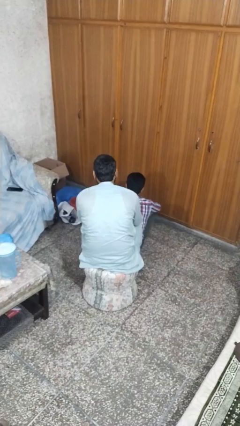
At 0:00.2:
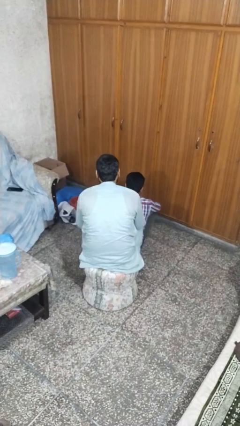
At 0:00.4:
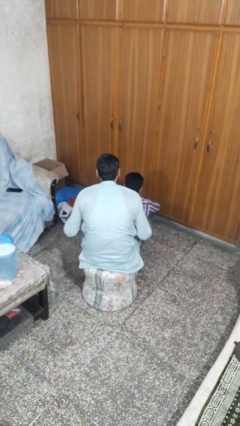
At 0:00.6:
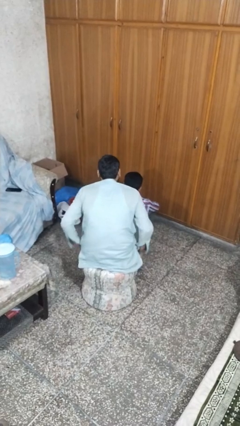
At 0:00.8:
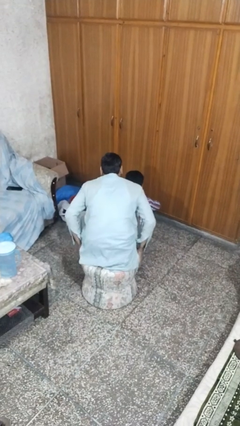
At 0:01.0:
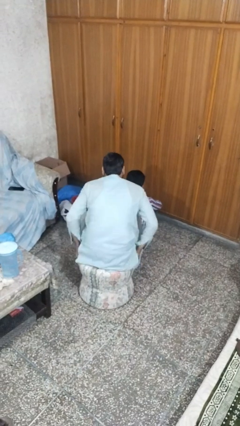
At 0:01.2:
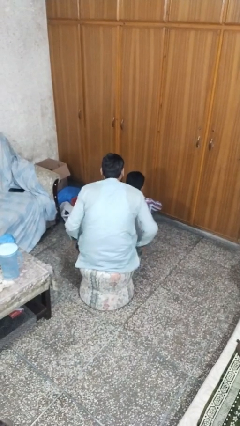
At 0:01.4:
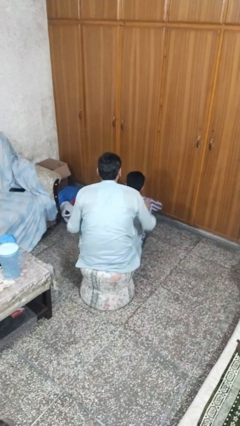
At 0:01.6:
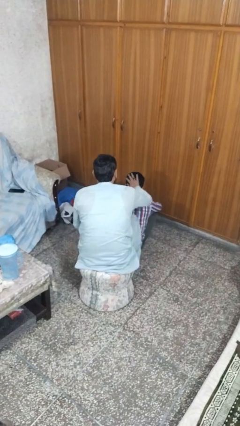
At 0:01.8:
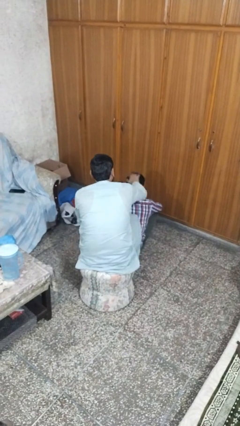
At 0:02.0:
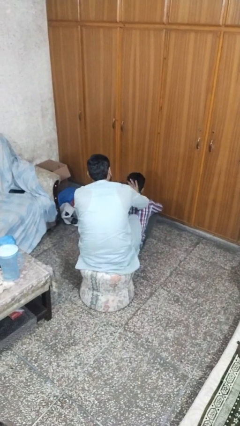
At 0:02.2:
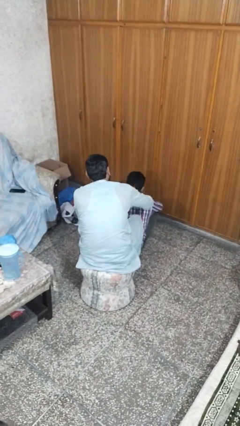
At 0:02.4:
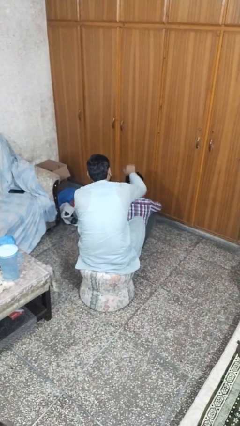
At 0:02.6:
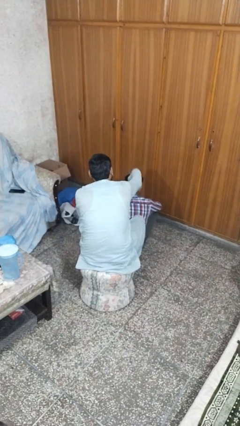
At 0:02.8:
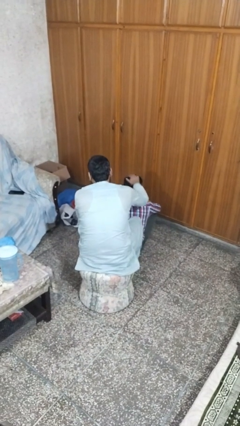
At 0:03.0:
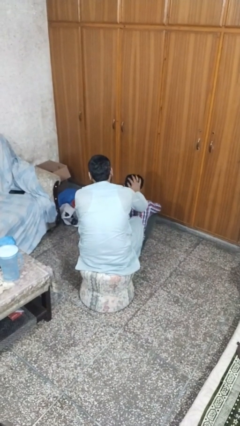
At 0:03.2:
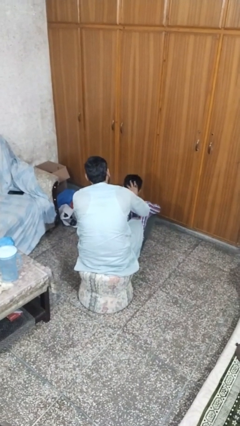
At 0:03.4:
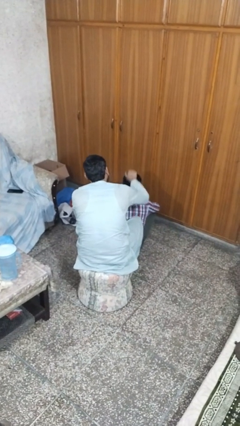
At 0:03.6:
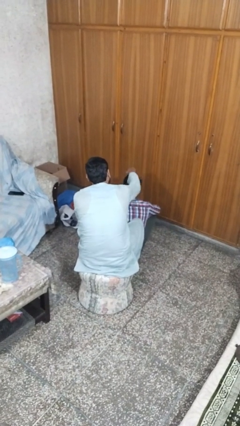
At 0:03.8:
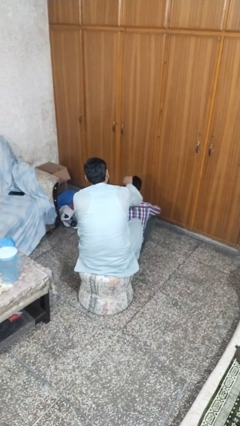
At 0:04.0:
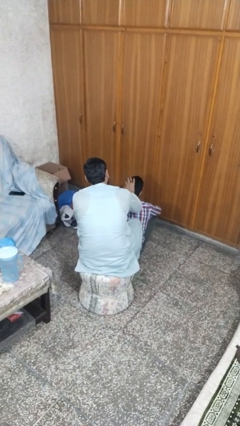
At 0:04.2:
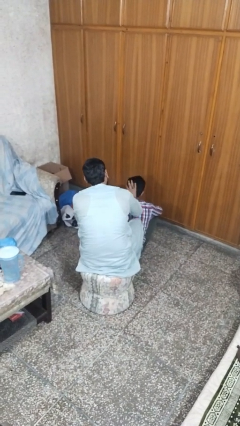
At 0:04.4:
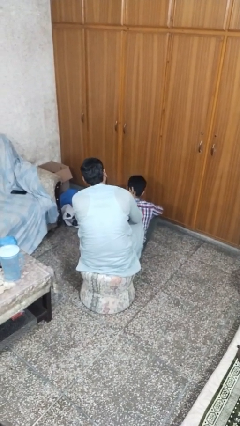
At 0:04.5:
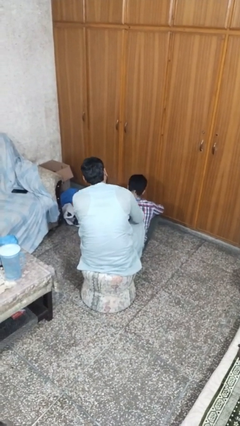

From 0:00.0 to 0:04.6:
person braids hair of person

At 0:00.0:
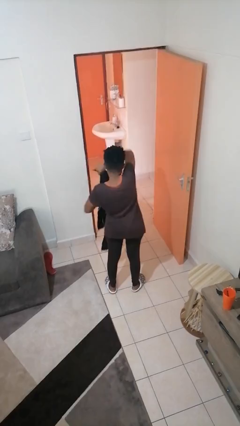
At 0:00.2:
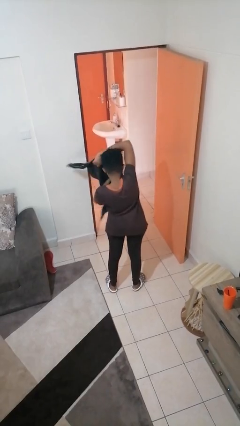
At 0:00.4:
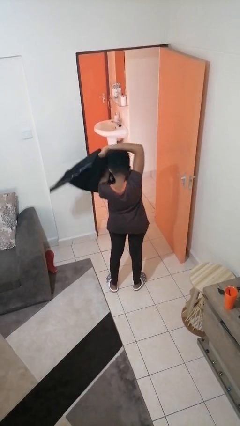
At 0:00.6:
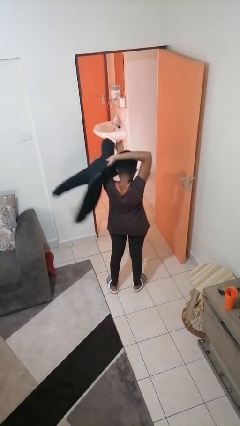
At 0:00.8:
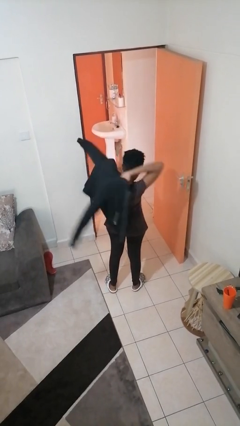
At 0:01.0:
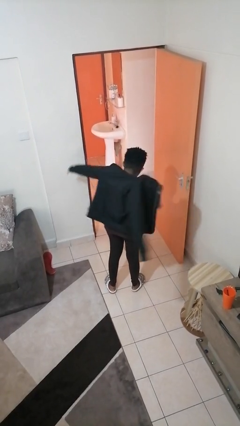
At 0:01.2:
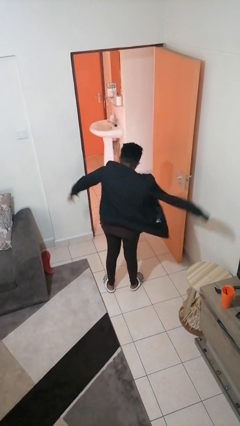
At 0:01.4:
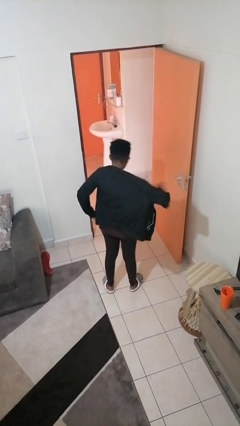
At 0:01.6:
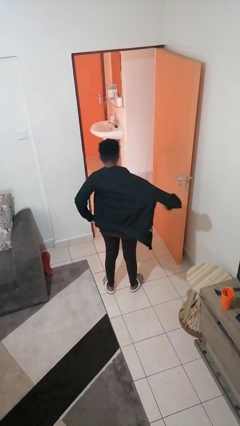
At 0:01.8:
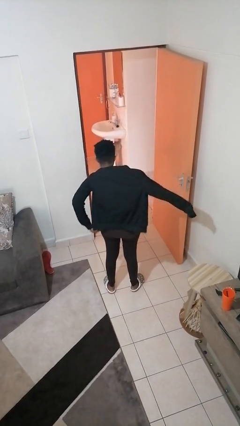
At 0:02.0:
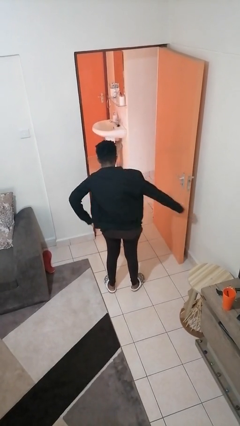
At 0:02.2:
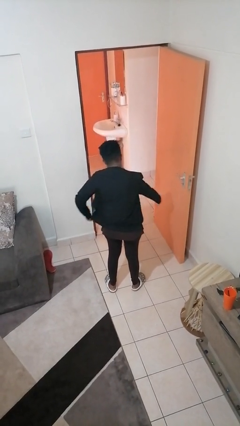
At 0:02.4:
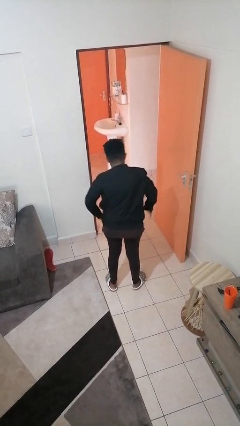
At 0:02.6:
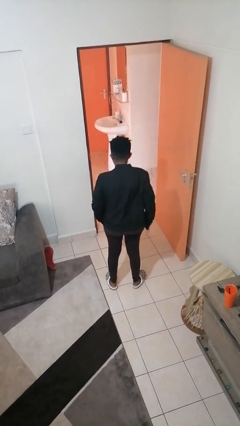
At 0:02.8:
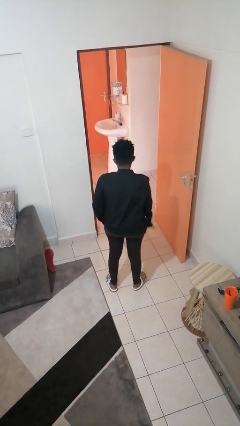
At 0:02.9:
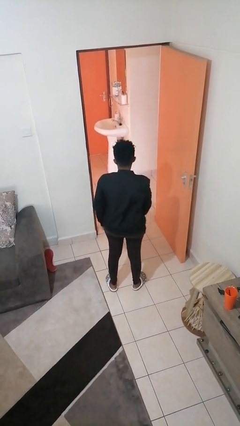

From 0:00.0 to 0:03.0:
person puts on jacket

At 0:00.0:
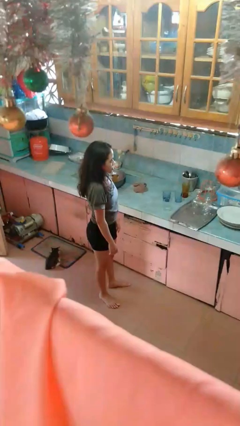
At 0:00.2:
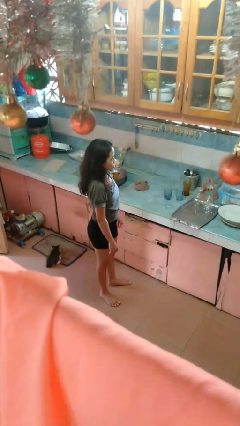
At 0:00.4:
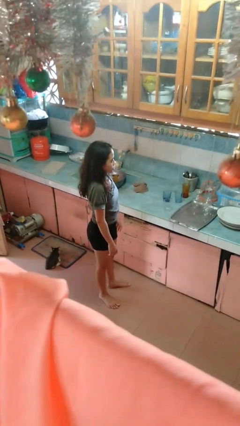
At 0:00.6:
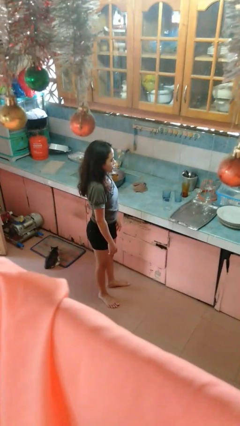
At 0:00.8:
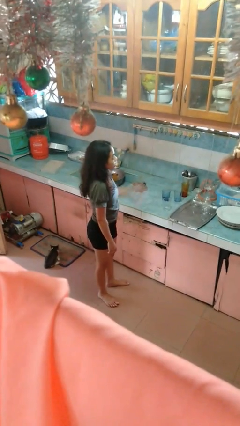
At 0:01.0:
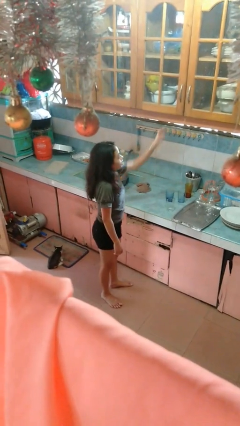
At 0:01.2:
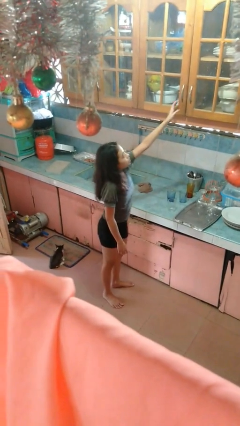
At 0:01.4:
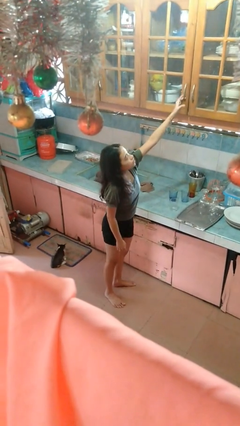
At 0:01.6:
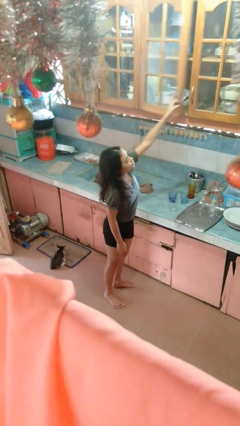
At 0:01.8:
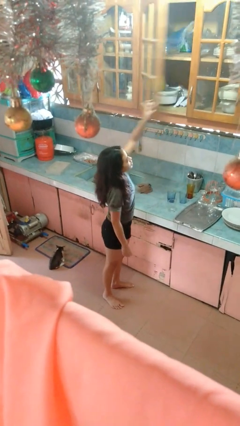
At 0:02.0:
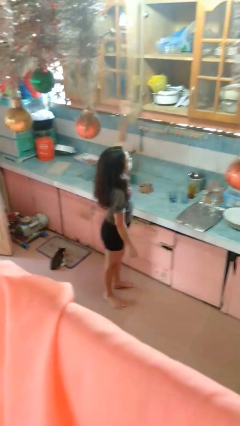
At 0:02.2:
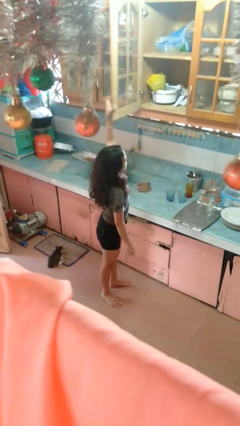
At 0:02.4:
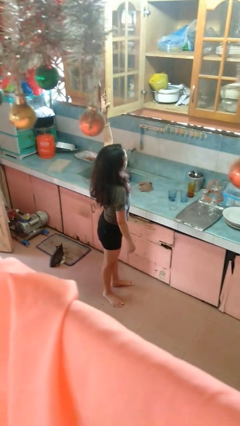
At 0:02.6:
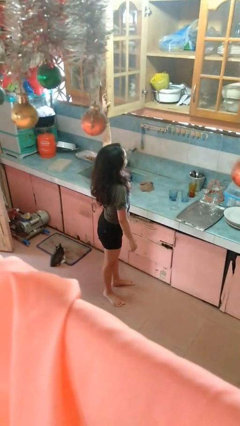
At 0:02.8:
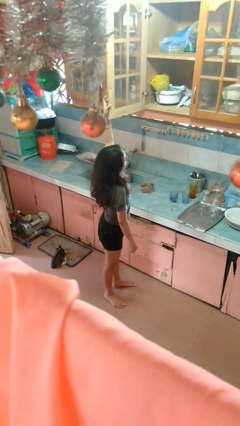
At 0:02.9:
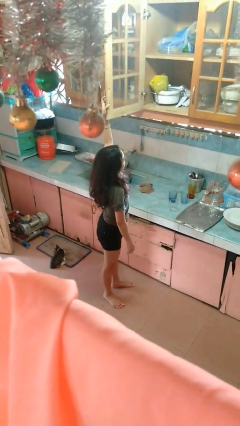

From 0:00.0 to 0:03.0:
person opens cabinet

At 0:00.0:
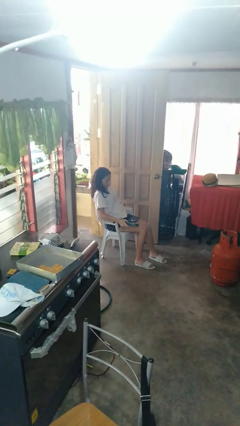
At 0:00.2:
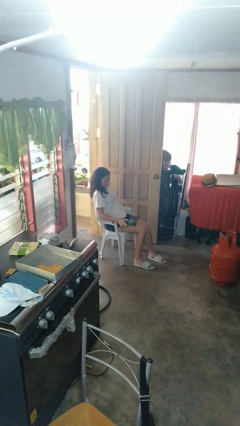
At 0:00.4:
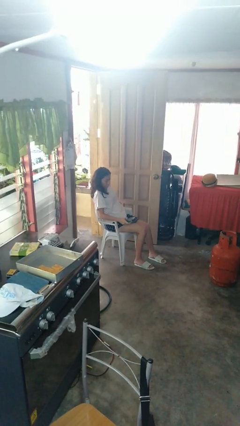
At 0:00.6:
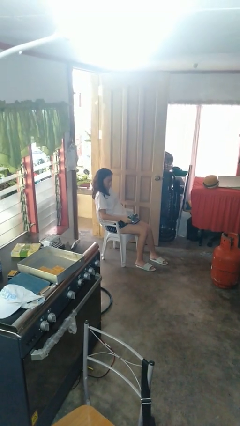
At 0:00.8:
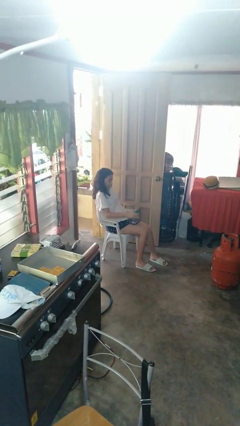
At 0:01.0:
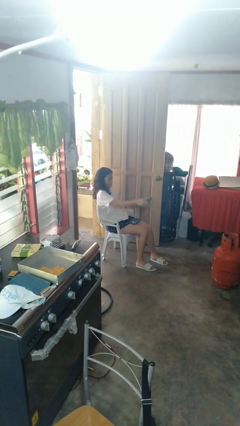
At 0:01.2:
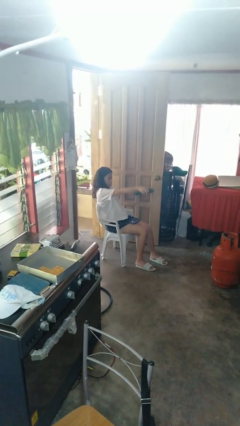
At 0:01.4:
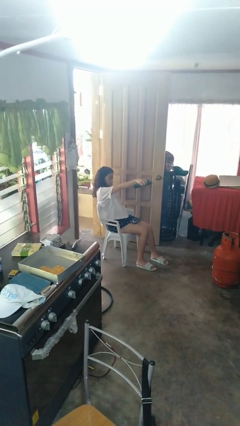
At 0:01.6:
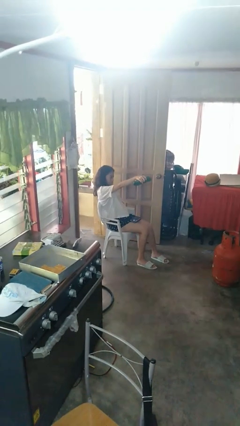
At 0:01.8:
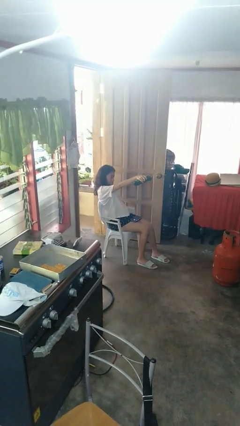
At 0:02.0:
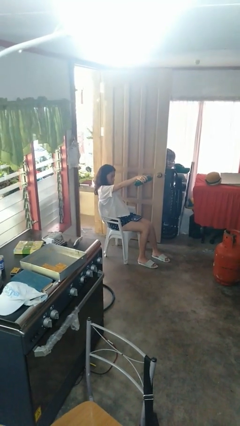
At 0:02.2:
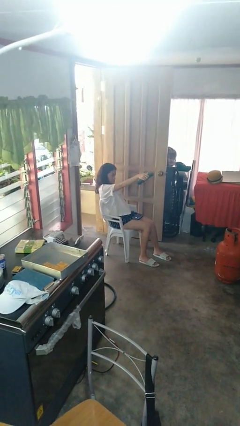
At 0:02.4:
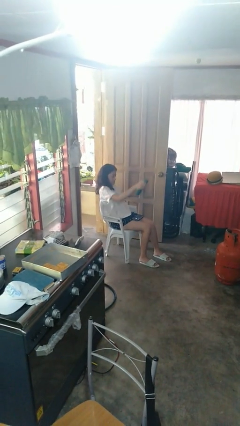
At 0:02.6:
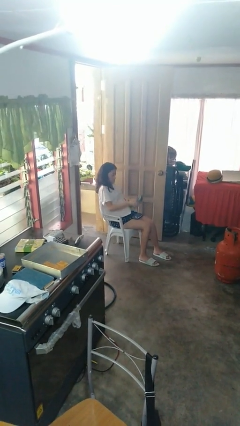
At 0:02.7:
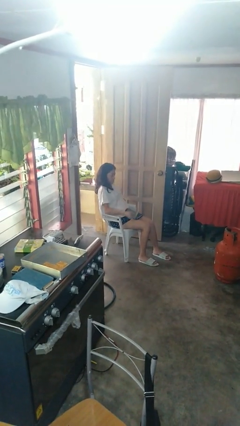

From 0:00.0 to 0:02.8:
person uses television remote

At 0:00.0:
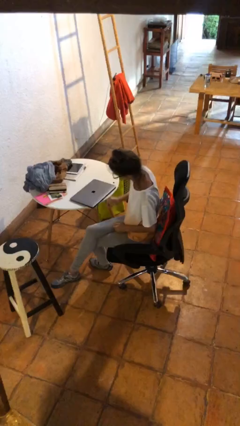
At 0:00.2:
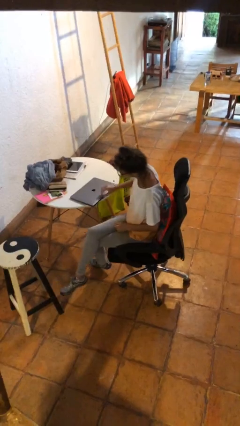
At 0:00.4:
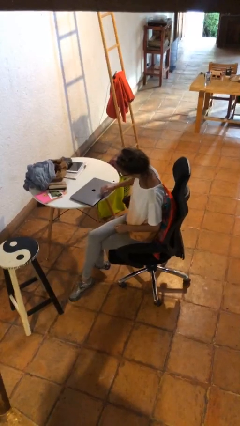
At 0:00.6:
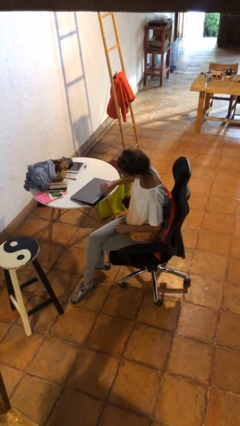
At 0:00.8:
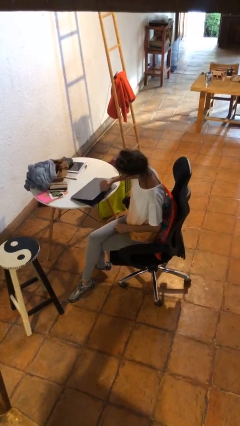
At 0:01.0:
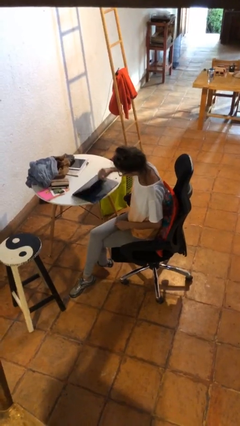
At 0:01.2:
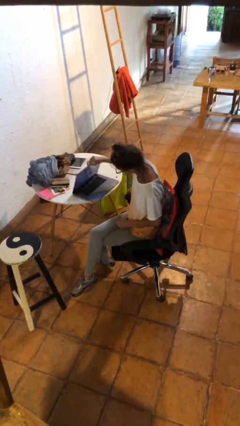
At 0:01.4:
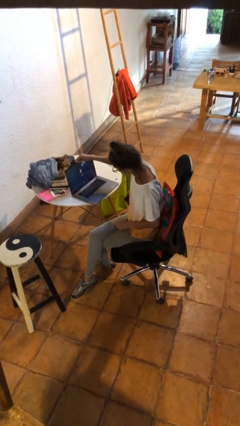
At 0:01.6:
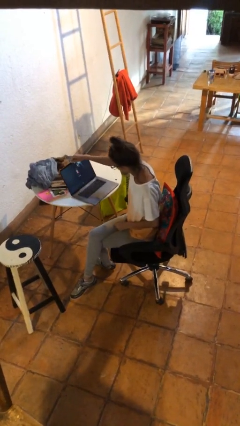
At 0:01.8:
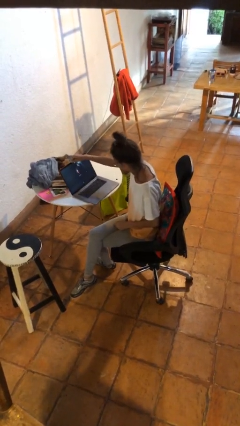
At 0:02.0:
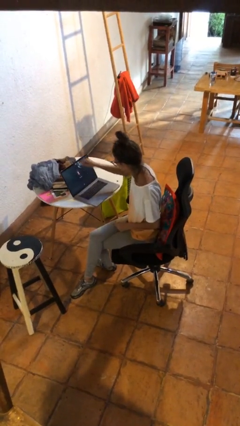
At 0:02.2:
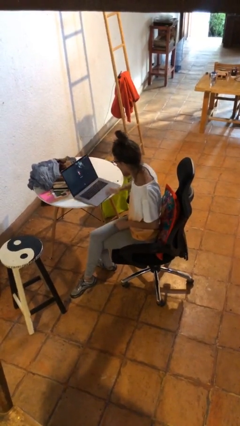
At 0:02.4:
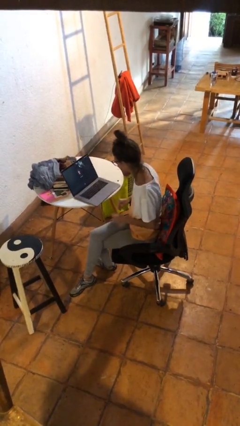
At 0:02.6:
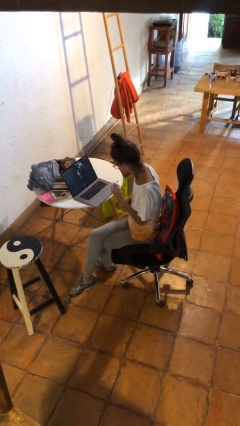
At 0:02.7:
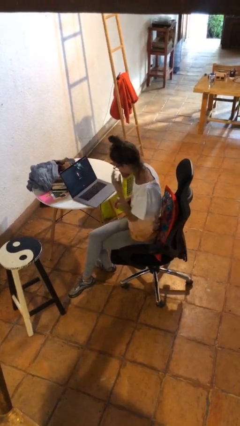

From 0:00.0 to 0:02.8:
person opens laptop

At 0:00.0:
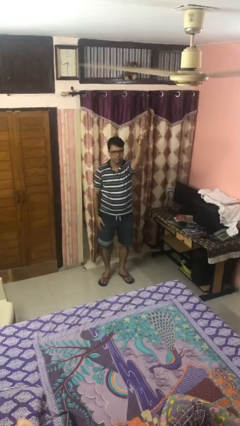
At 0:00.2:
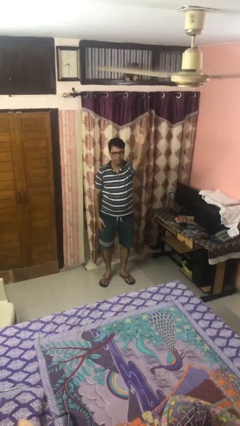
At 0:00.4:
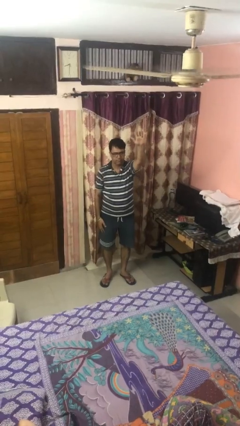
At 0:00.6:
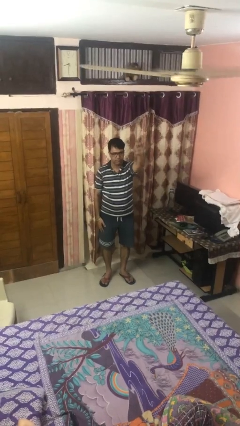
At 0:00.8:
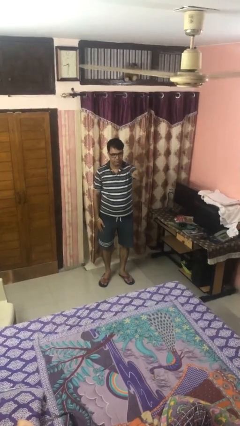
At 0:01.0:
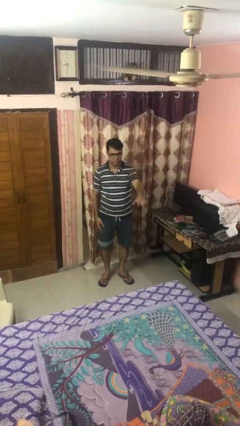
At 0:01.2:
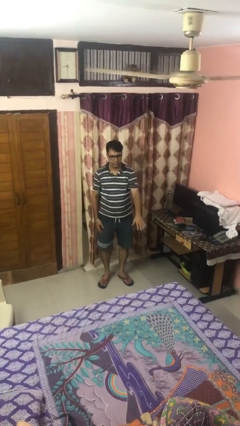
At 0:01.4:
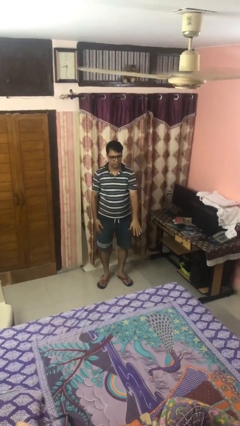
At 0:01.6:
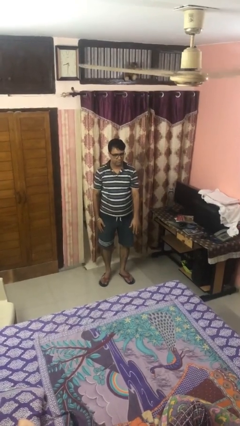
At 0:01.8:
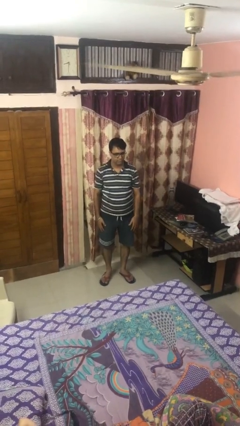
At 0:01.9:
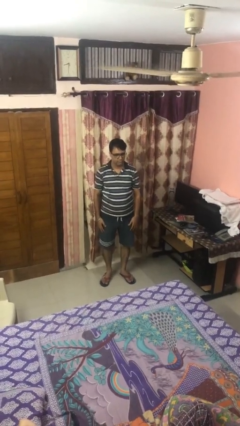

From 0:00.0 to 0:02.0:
person gestures swipe down
